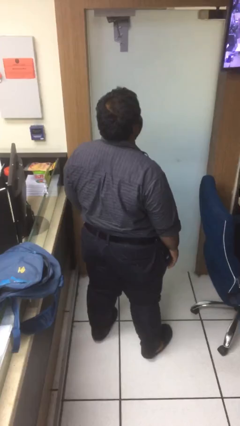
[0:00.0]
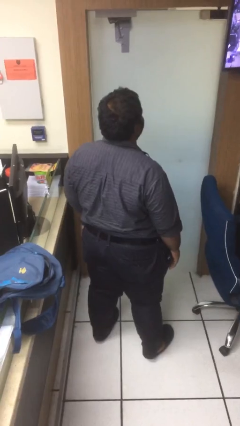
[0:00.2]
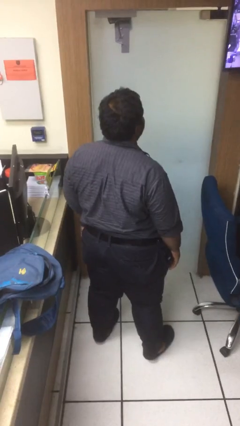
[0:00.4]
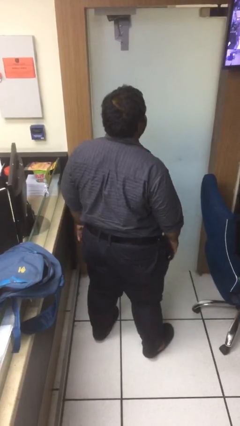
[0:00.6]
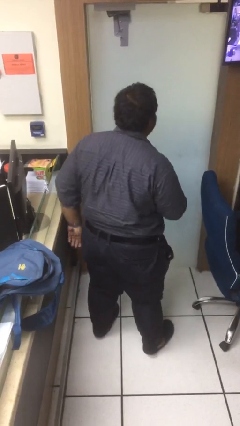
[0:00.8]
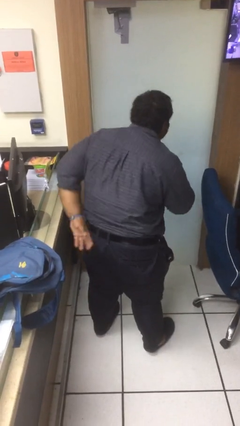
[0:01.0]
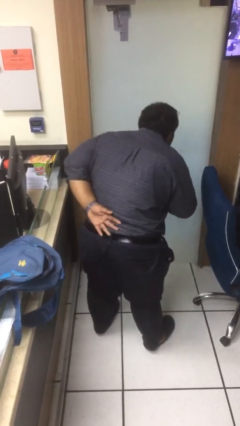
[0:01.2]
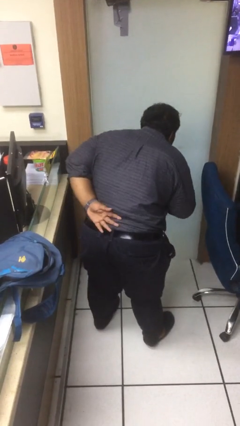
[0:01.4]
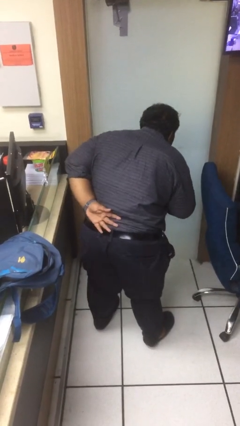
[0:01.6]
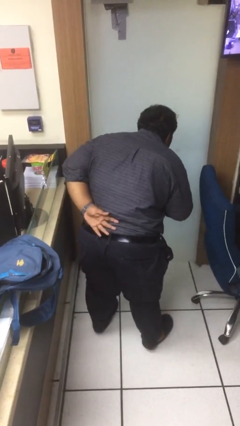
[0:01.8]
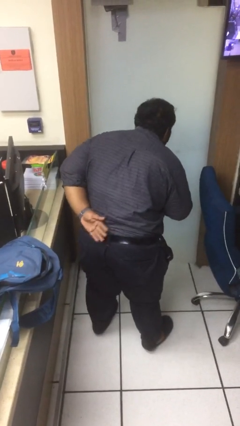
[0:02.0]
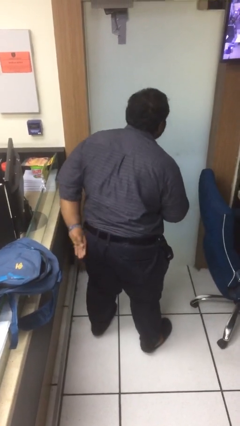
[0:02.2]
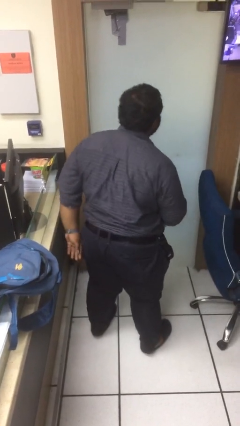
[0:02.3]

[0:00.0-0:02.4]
person bows

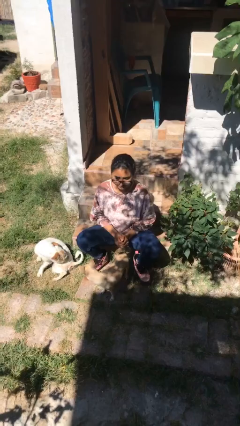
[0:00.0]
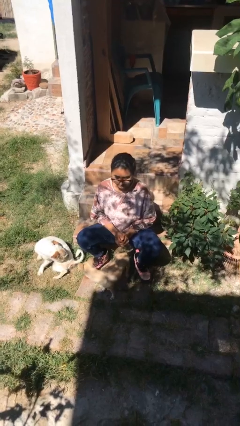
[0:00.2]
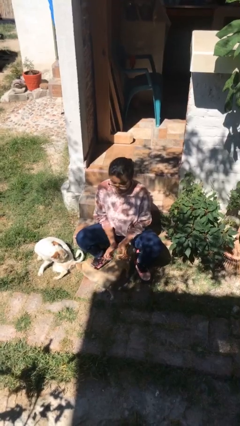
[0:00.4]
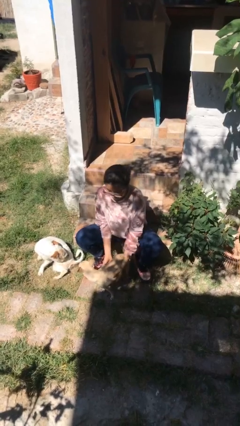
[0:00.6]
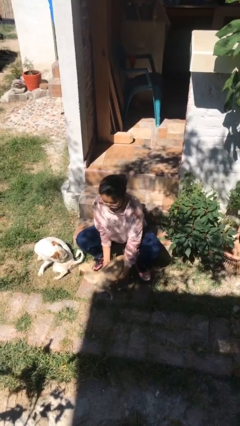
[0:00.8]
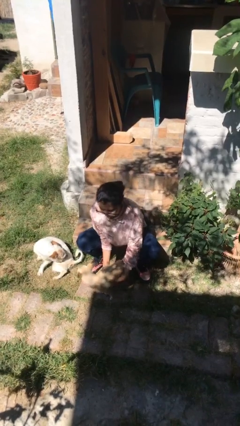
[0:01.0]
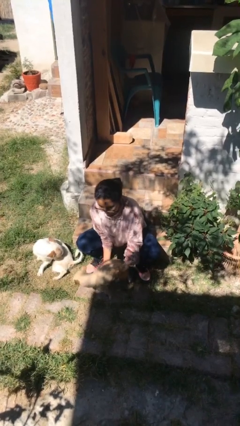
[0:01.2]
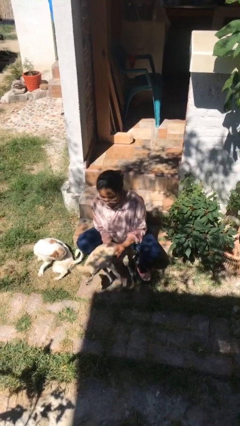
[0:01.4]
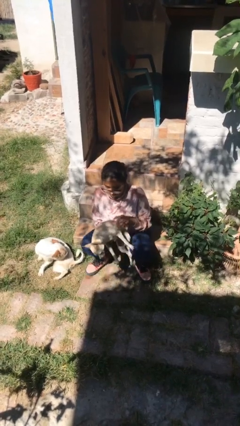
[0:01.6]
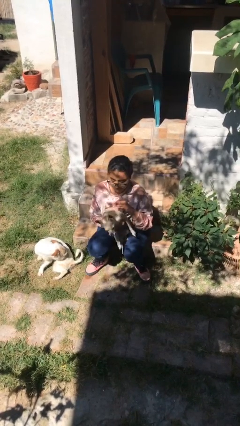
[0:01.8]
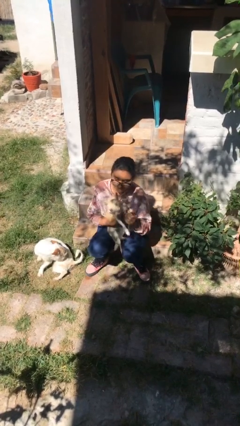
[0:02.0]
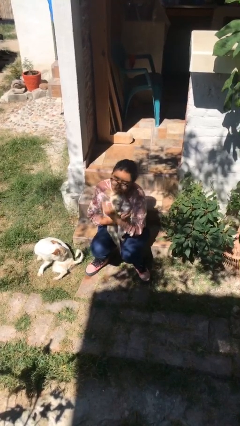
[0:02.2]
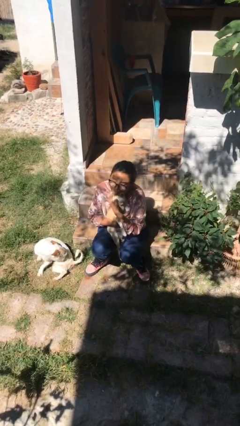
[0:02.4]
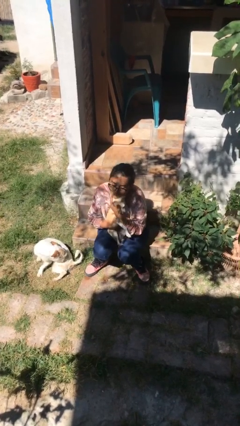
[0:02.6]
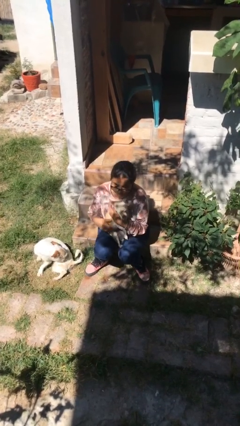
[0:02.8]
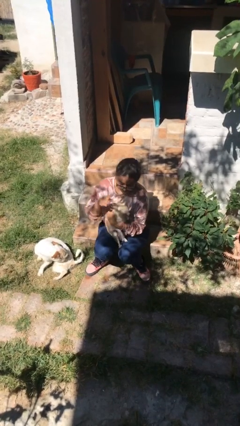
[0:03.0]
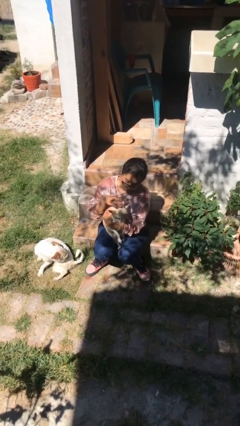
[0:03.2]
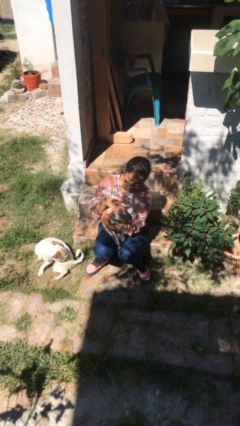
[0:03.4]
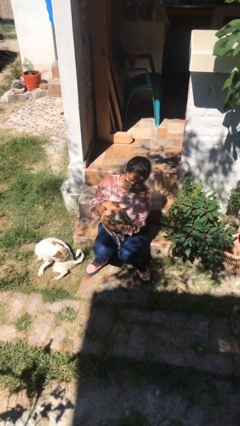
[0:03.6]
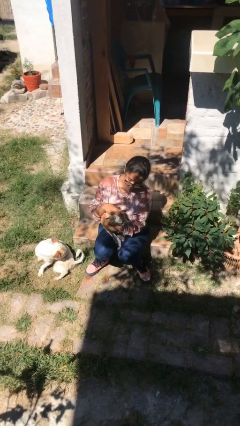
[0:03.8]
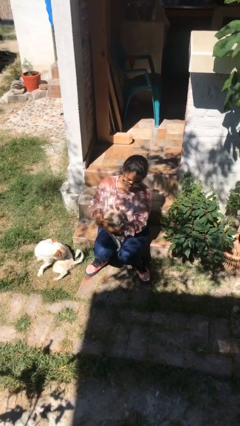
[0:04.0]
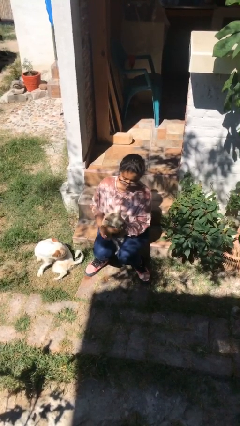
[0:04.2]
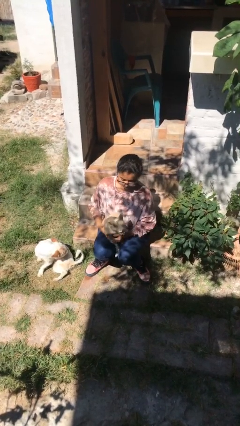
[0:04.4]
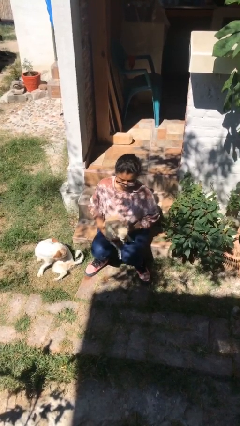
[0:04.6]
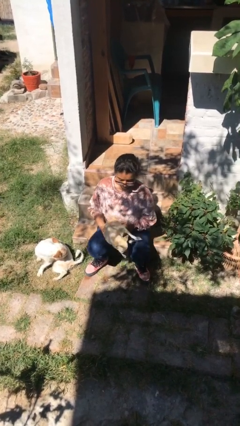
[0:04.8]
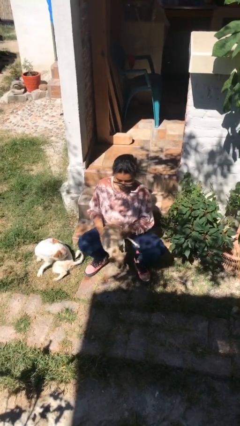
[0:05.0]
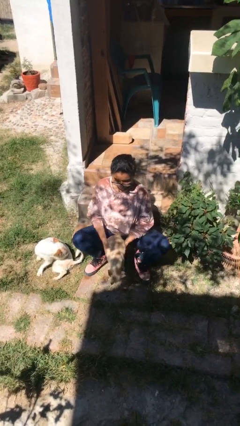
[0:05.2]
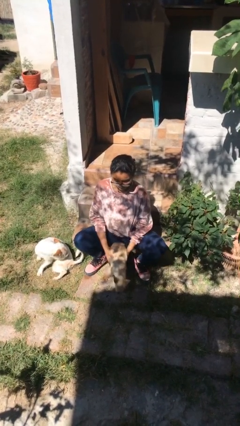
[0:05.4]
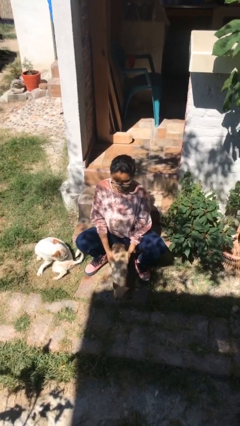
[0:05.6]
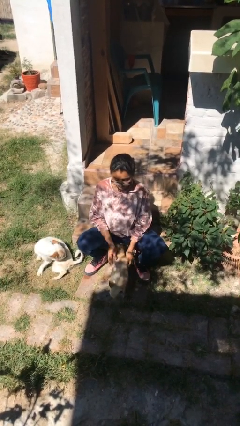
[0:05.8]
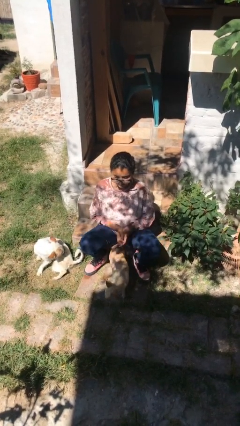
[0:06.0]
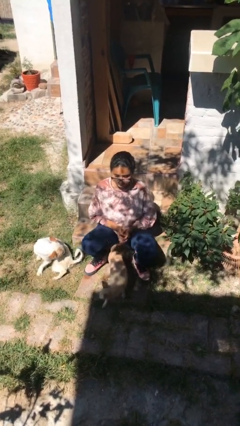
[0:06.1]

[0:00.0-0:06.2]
person hugs dog

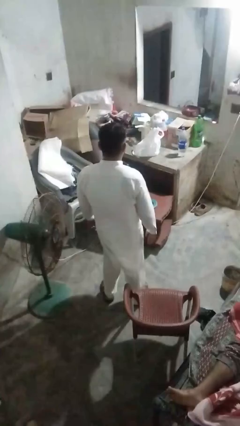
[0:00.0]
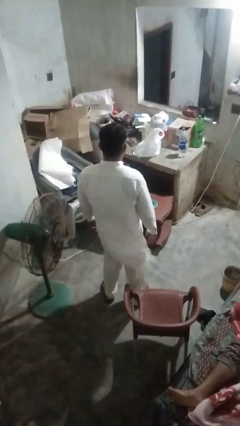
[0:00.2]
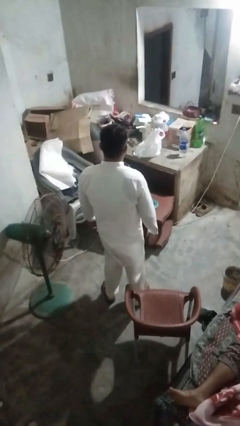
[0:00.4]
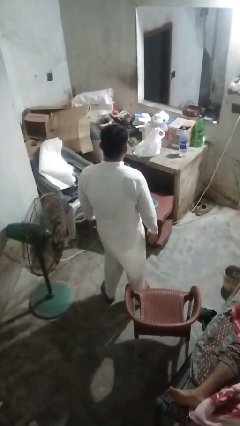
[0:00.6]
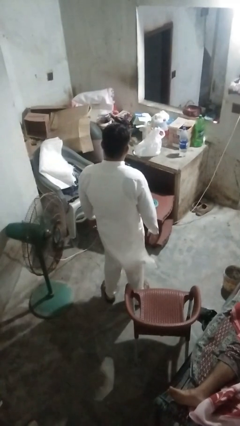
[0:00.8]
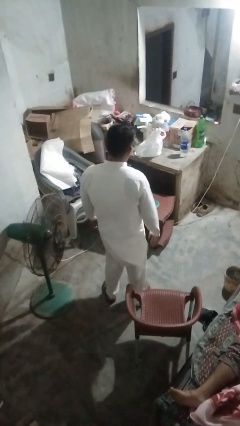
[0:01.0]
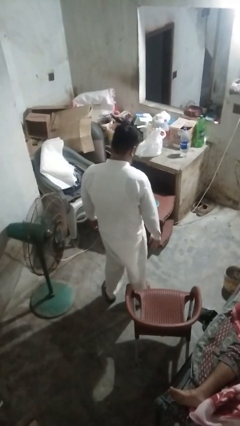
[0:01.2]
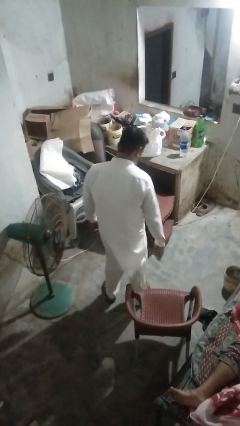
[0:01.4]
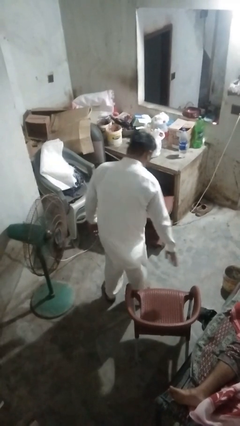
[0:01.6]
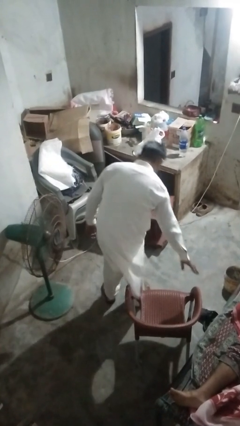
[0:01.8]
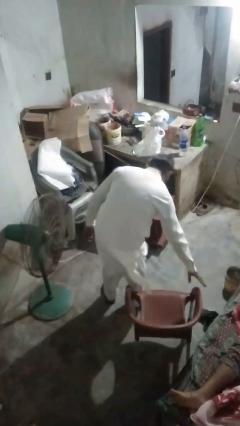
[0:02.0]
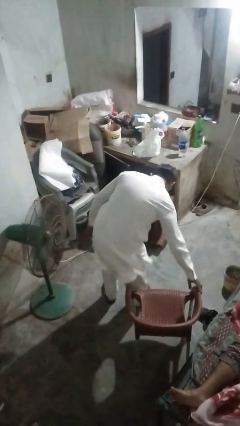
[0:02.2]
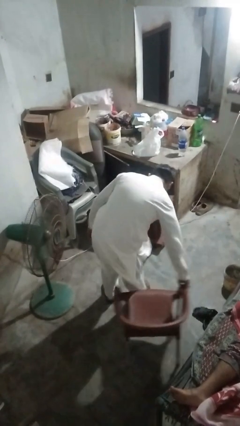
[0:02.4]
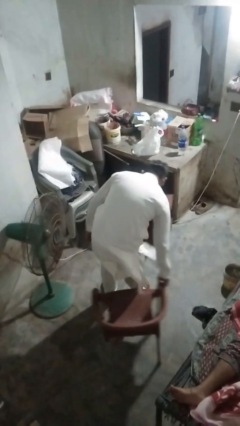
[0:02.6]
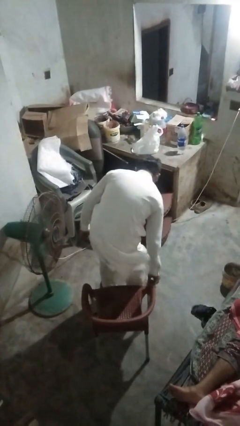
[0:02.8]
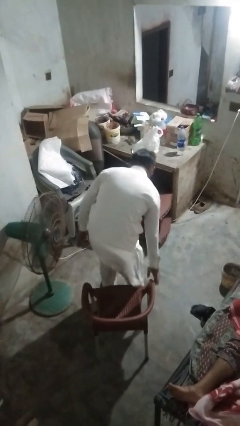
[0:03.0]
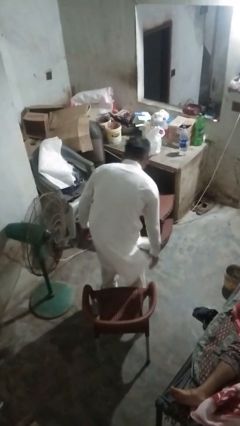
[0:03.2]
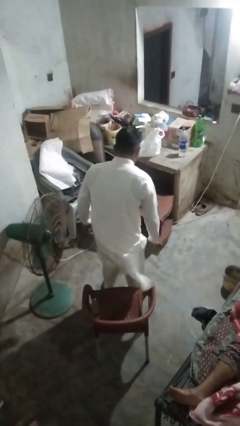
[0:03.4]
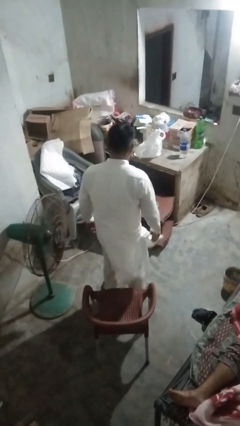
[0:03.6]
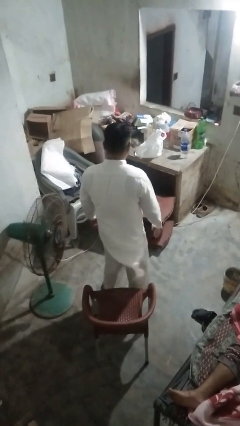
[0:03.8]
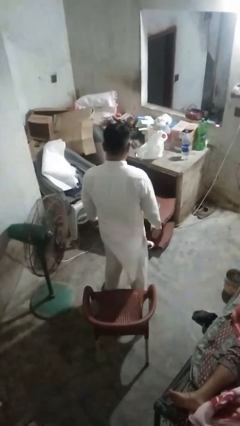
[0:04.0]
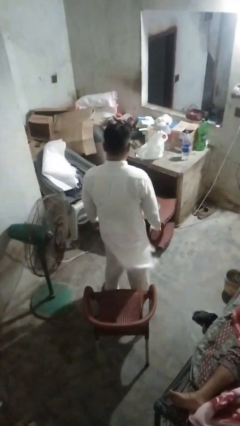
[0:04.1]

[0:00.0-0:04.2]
person pulls out chair

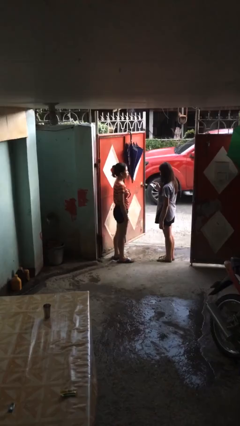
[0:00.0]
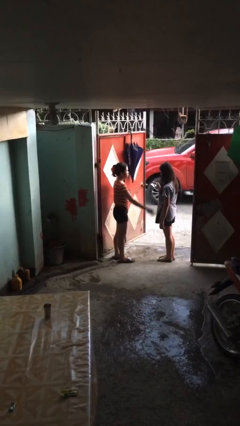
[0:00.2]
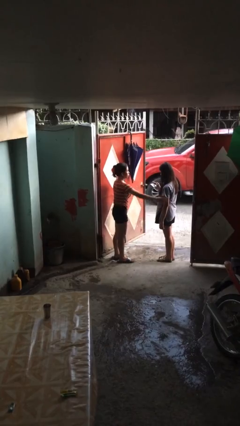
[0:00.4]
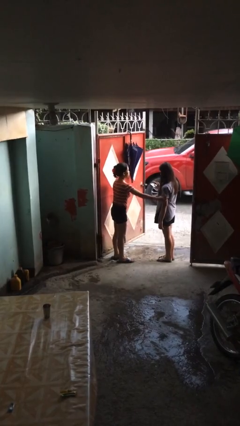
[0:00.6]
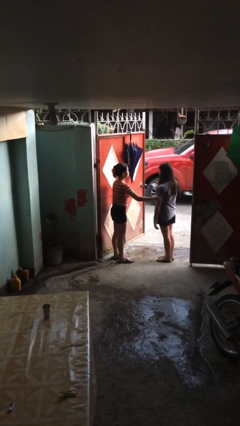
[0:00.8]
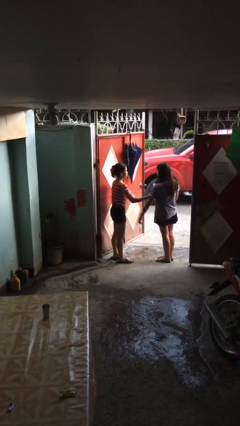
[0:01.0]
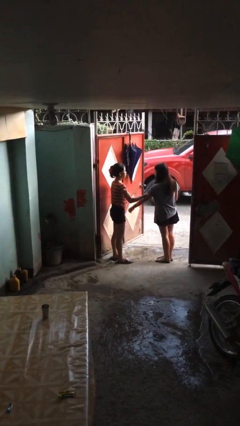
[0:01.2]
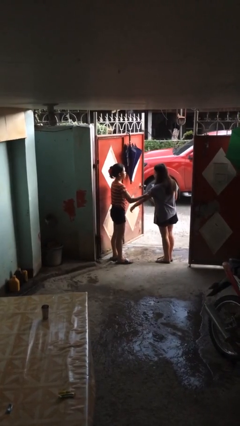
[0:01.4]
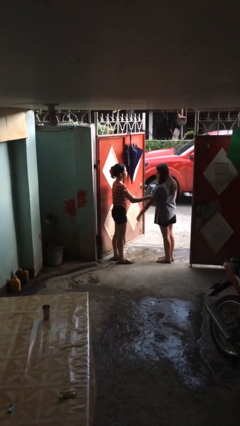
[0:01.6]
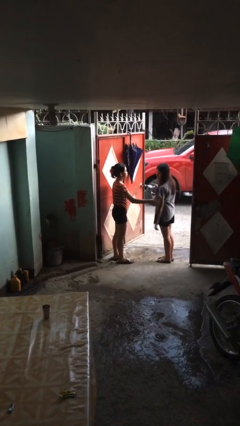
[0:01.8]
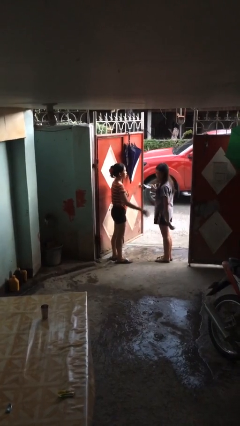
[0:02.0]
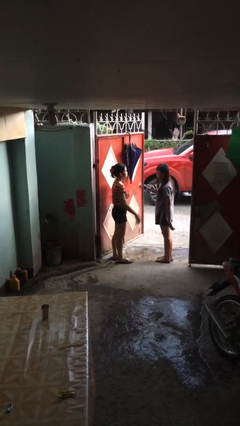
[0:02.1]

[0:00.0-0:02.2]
person grabs person by bicep

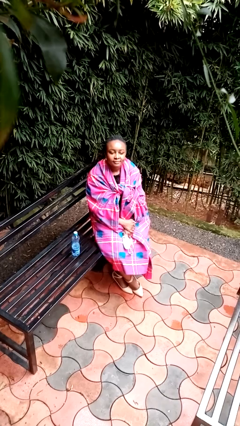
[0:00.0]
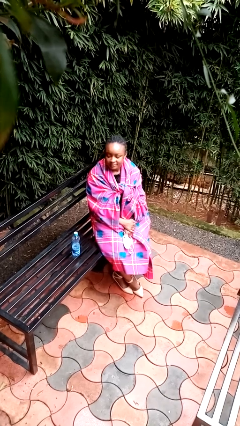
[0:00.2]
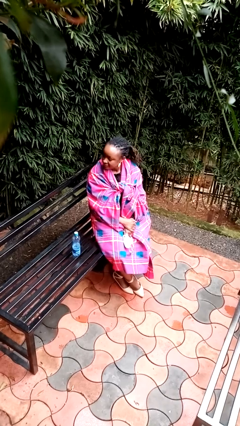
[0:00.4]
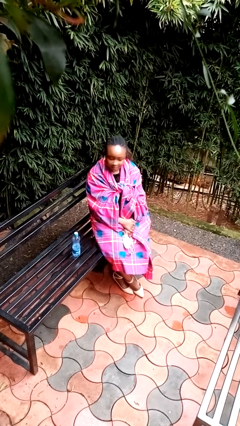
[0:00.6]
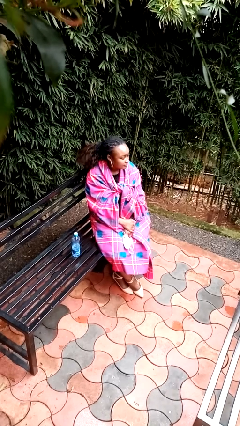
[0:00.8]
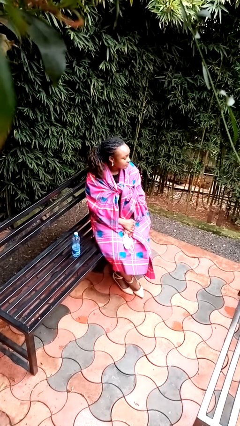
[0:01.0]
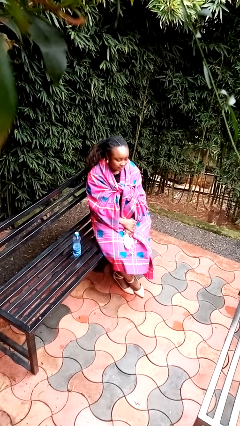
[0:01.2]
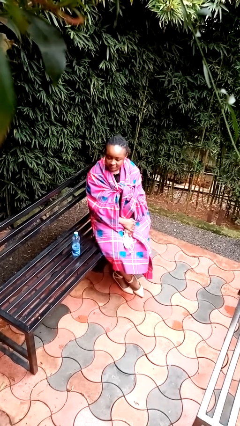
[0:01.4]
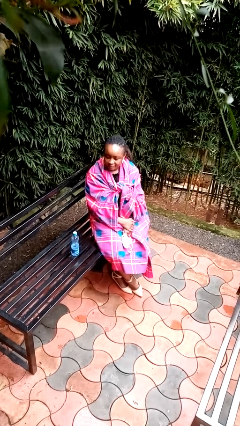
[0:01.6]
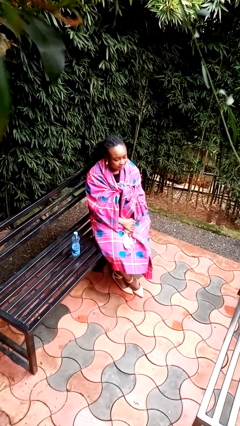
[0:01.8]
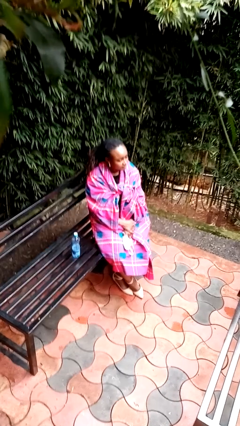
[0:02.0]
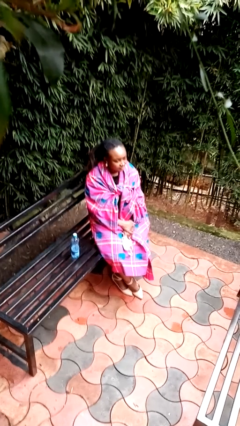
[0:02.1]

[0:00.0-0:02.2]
person shakes head

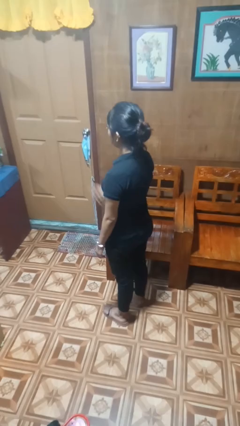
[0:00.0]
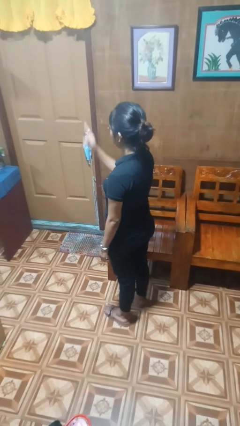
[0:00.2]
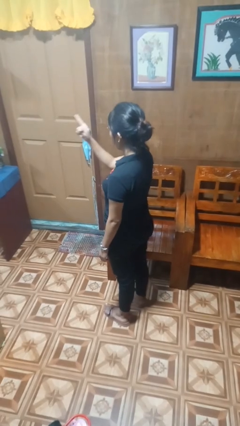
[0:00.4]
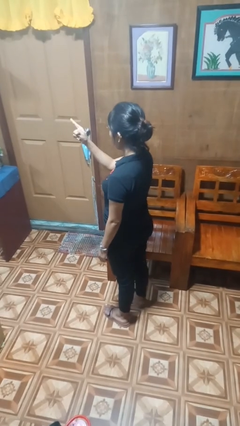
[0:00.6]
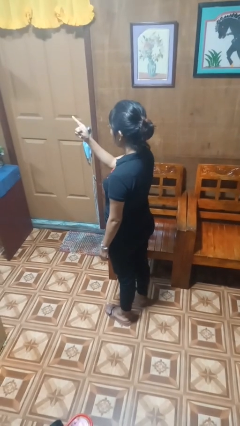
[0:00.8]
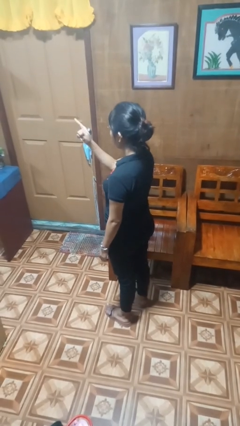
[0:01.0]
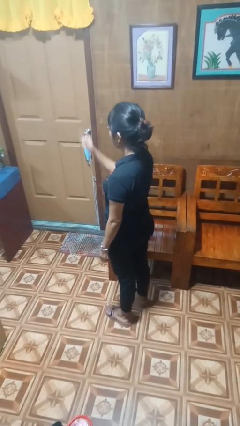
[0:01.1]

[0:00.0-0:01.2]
person points at person
